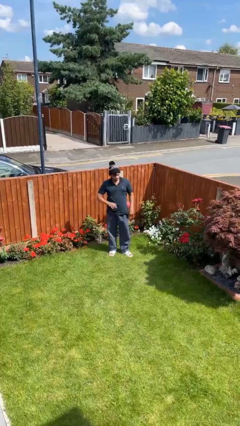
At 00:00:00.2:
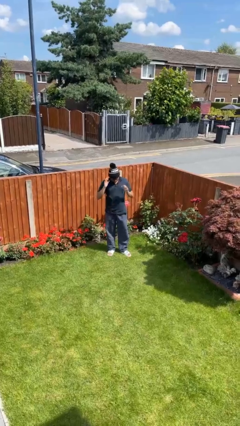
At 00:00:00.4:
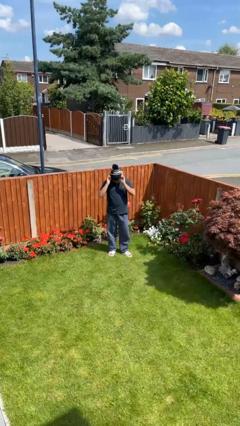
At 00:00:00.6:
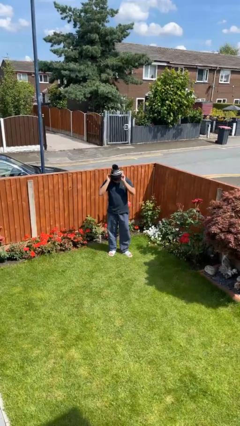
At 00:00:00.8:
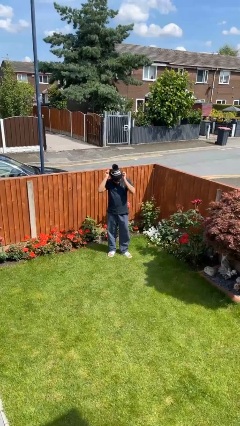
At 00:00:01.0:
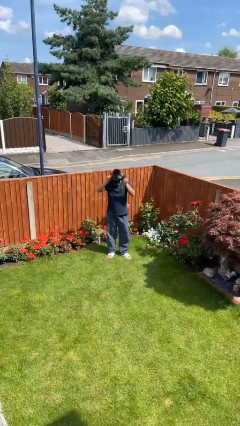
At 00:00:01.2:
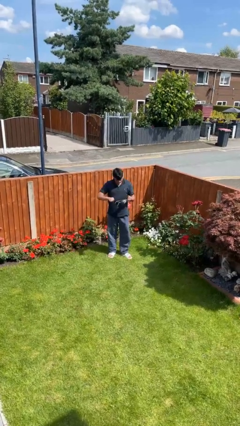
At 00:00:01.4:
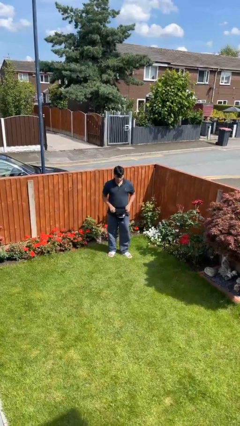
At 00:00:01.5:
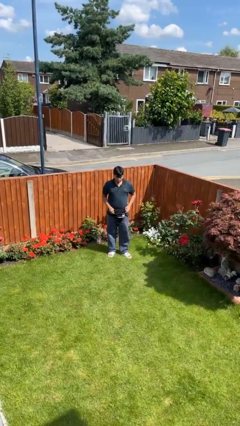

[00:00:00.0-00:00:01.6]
person takes off hat

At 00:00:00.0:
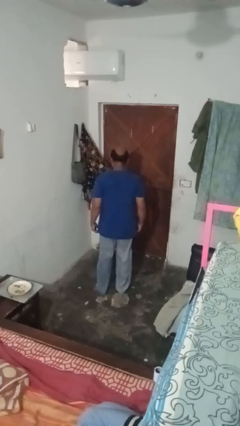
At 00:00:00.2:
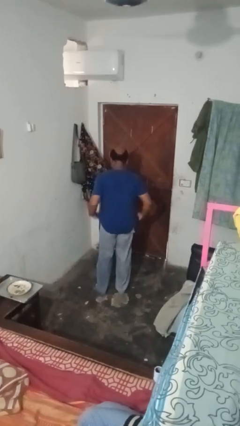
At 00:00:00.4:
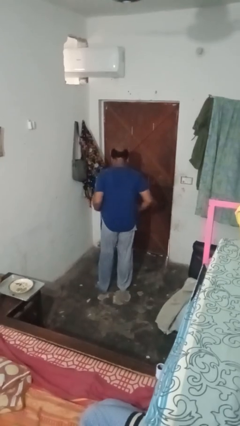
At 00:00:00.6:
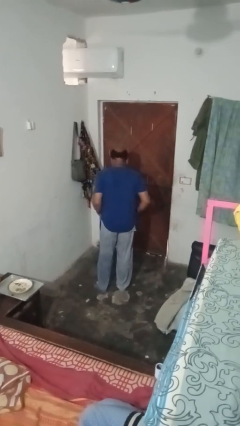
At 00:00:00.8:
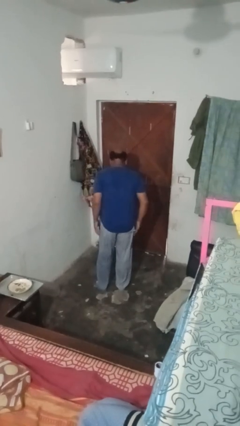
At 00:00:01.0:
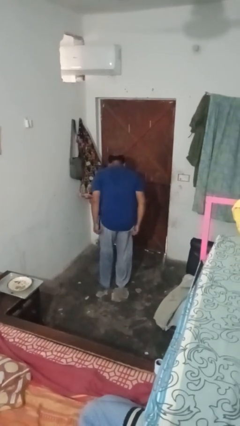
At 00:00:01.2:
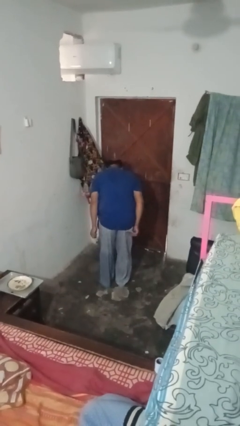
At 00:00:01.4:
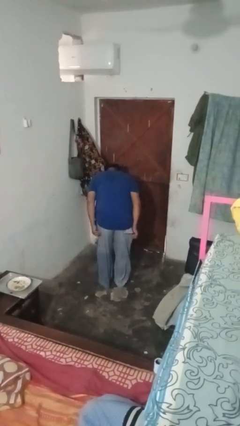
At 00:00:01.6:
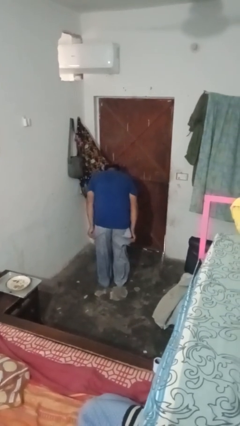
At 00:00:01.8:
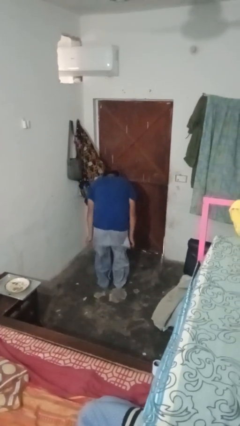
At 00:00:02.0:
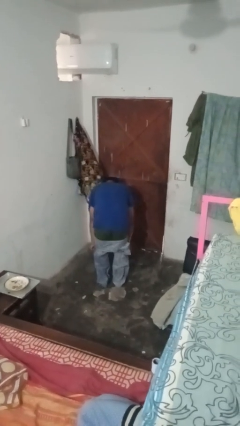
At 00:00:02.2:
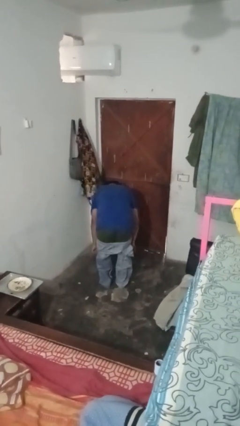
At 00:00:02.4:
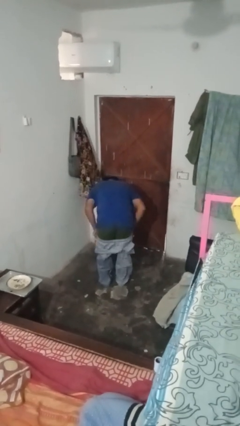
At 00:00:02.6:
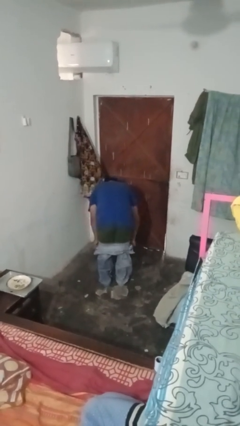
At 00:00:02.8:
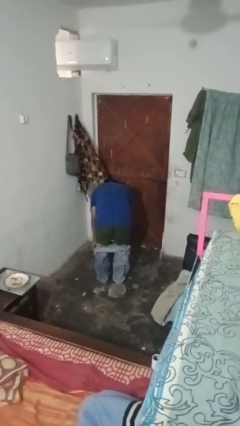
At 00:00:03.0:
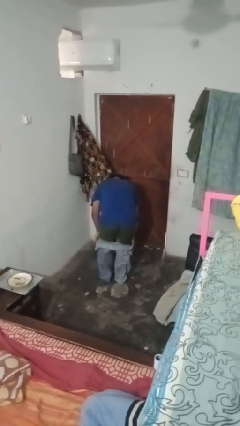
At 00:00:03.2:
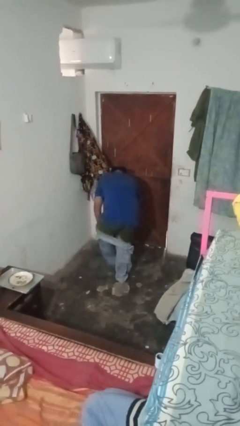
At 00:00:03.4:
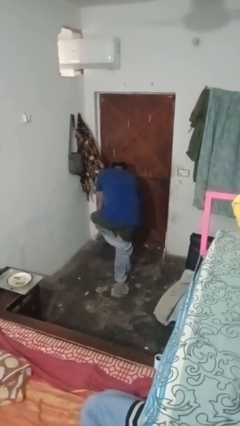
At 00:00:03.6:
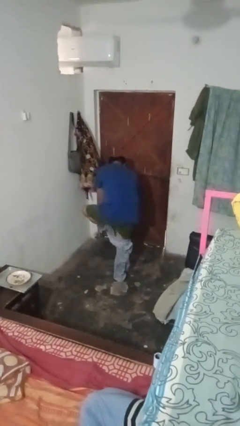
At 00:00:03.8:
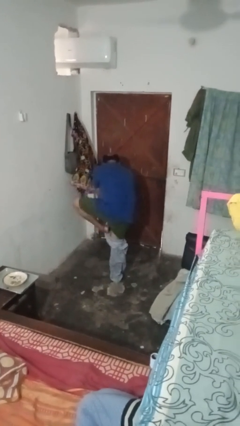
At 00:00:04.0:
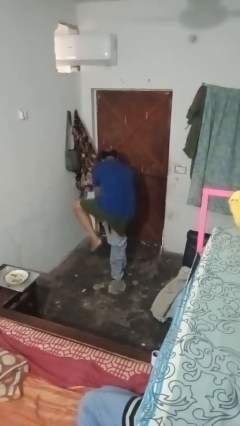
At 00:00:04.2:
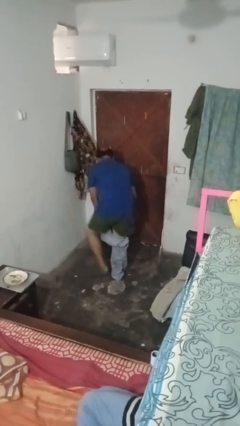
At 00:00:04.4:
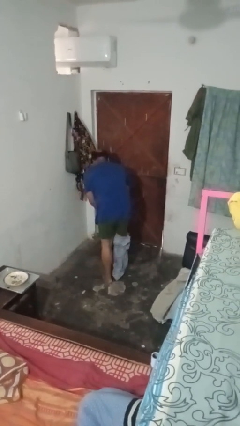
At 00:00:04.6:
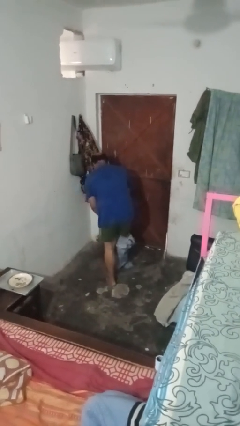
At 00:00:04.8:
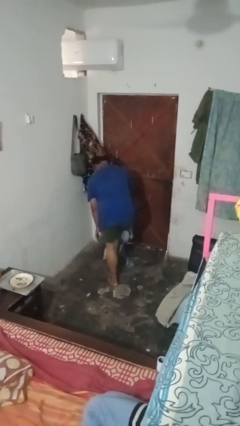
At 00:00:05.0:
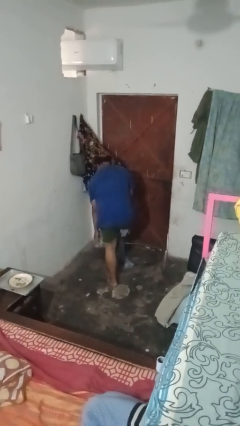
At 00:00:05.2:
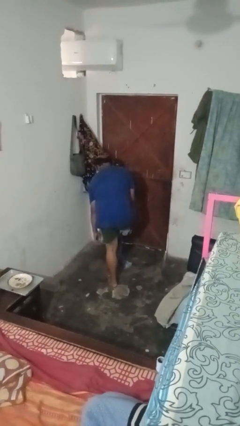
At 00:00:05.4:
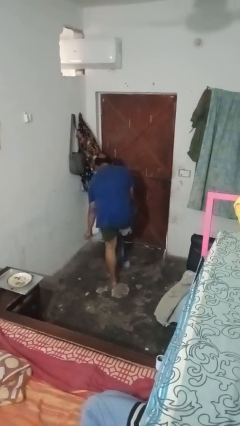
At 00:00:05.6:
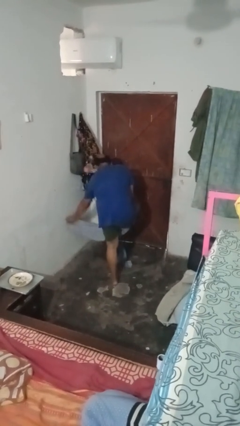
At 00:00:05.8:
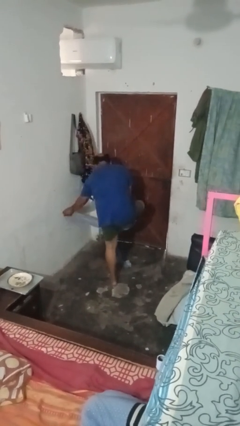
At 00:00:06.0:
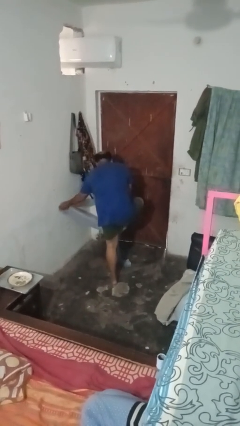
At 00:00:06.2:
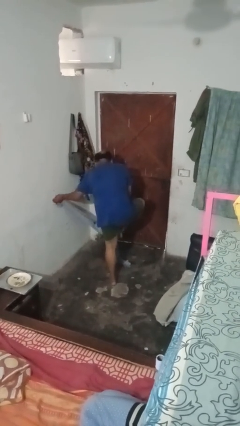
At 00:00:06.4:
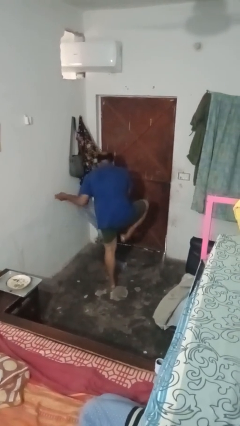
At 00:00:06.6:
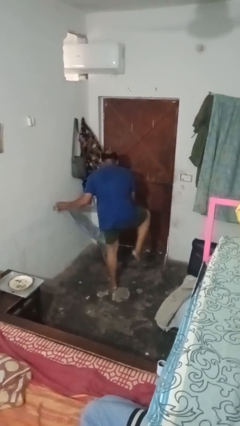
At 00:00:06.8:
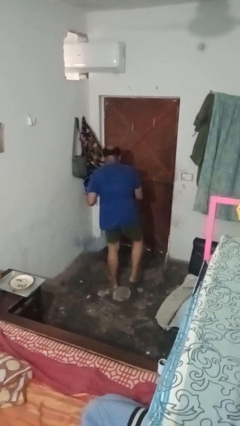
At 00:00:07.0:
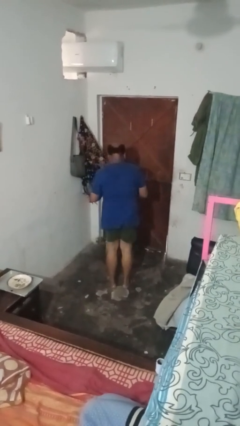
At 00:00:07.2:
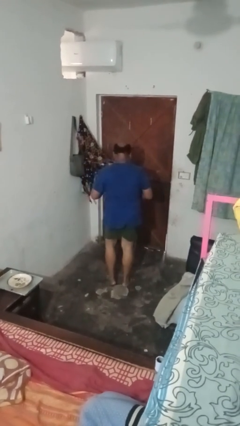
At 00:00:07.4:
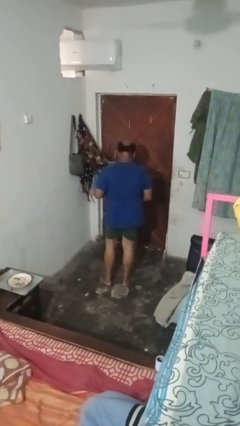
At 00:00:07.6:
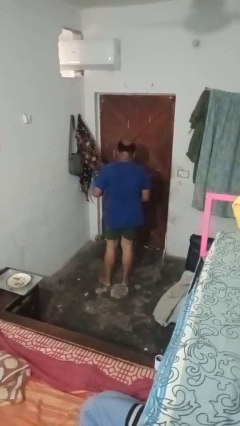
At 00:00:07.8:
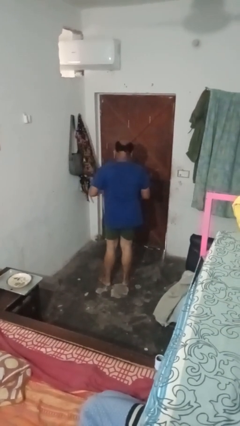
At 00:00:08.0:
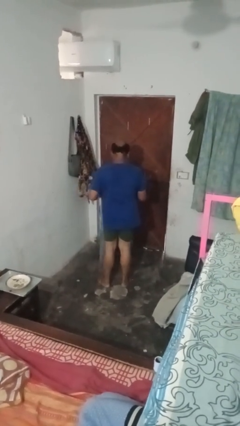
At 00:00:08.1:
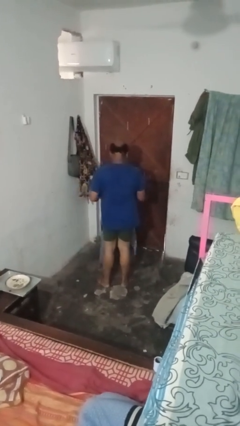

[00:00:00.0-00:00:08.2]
person takes off pants

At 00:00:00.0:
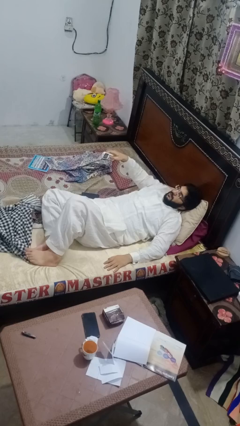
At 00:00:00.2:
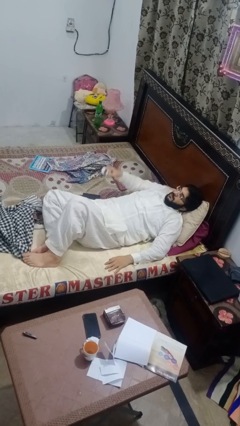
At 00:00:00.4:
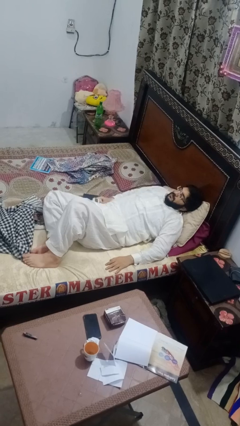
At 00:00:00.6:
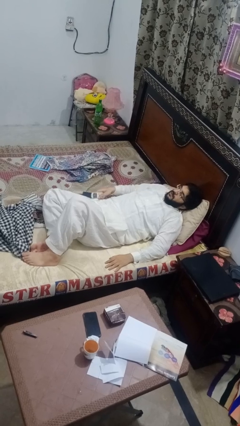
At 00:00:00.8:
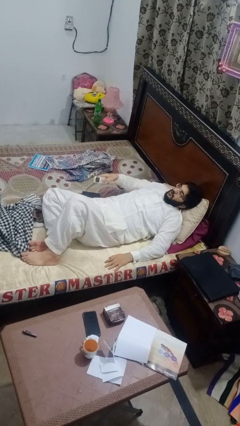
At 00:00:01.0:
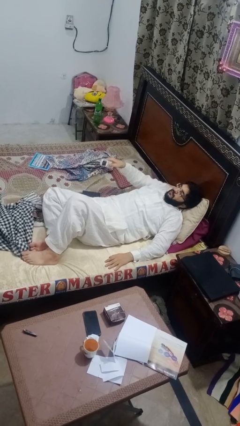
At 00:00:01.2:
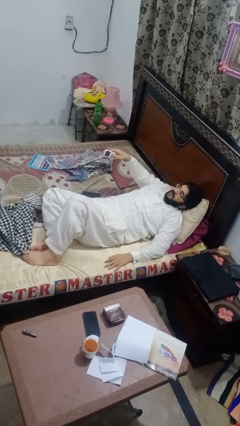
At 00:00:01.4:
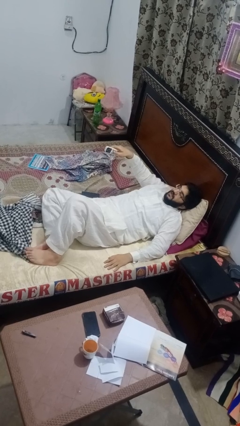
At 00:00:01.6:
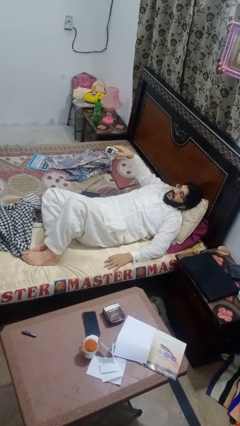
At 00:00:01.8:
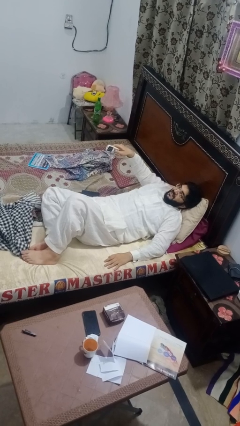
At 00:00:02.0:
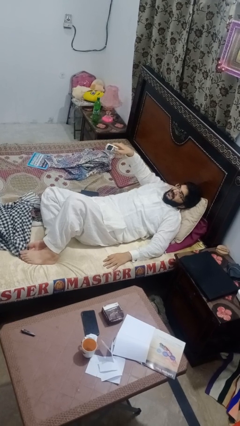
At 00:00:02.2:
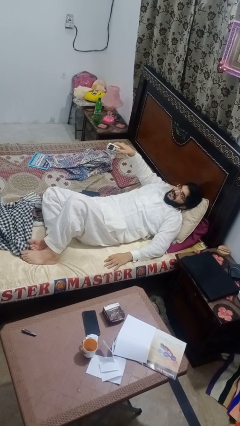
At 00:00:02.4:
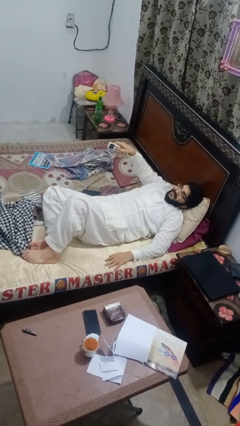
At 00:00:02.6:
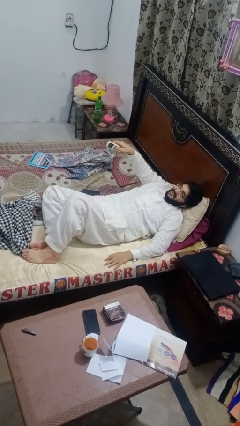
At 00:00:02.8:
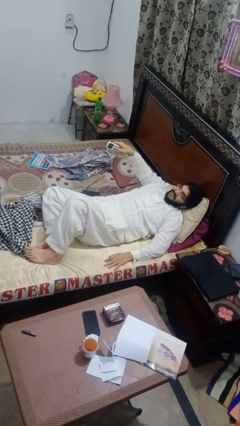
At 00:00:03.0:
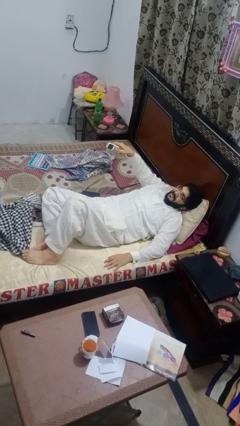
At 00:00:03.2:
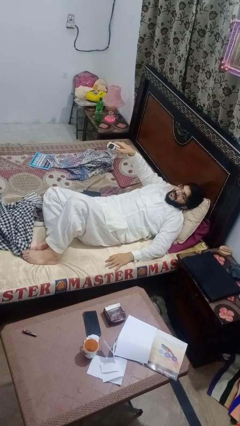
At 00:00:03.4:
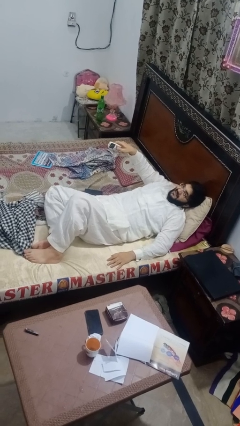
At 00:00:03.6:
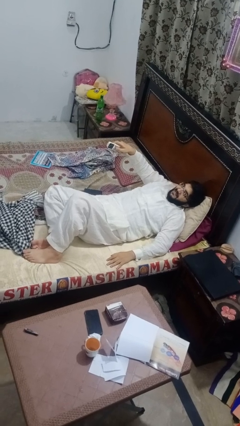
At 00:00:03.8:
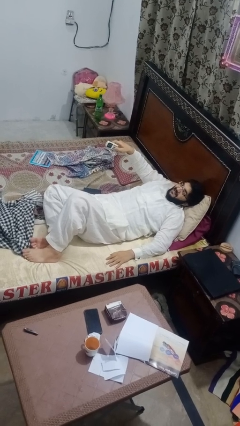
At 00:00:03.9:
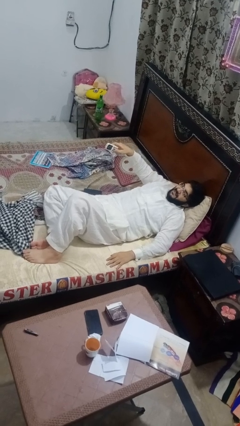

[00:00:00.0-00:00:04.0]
person uses television remote

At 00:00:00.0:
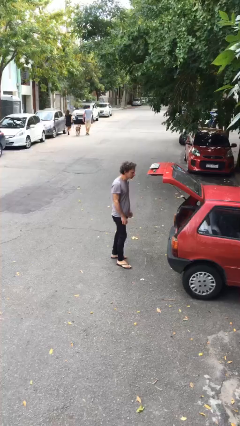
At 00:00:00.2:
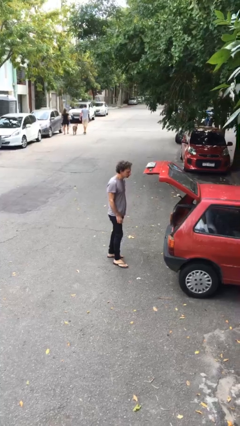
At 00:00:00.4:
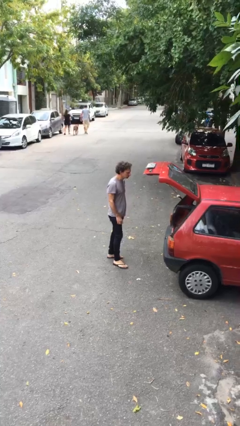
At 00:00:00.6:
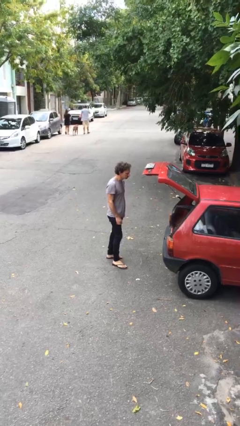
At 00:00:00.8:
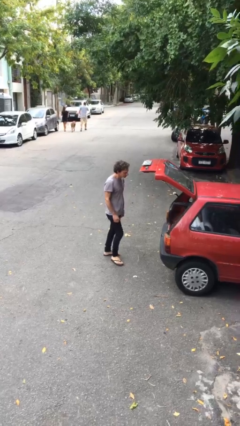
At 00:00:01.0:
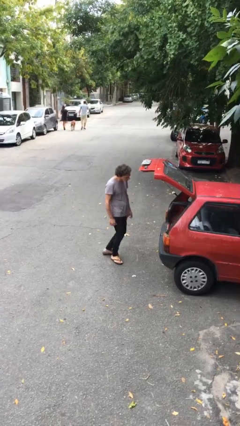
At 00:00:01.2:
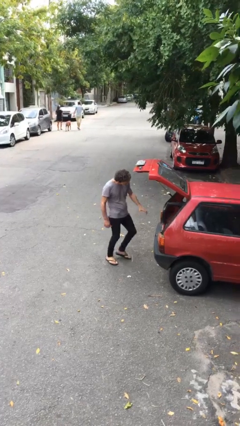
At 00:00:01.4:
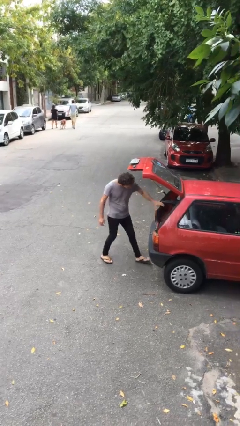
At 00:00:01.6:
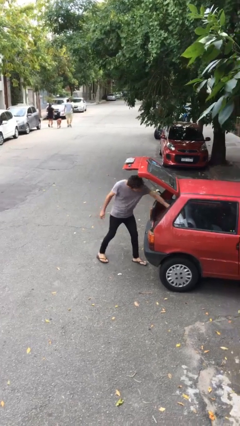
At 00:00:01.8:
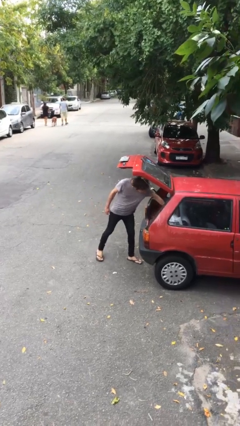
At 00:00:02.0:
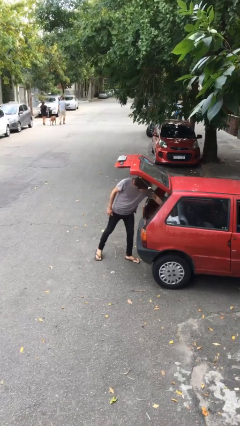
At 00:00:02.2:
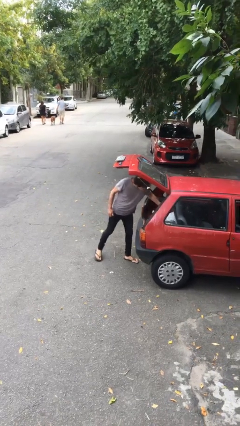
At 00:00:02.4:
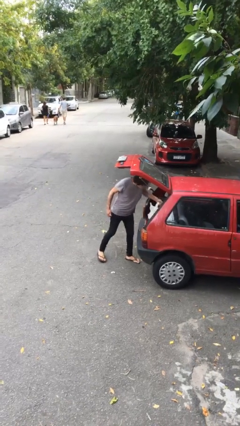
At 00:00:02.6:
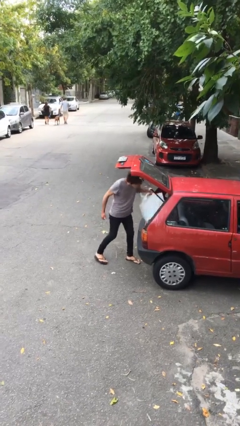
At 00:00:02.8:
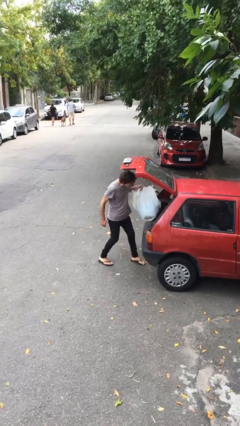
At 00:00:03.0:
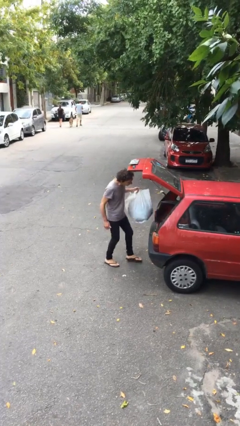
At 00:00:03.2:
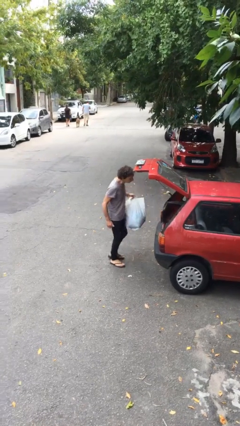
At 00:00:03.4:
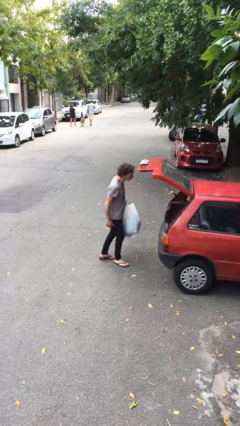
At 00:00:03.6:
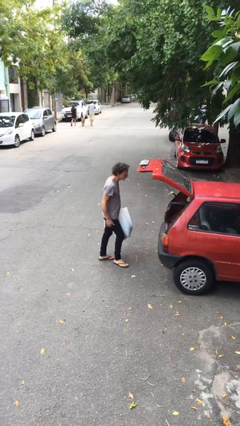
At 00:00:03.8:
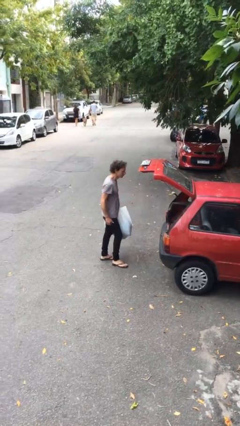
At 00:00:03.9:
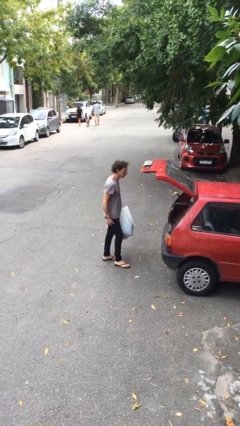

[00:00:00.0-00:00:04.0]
person unloads car
